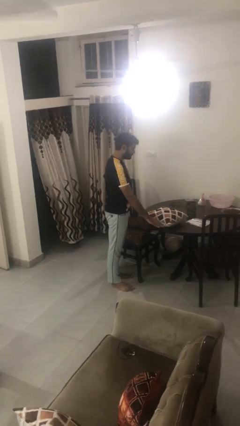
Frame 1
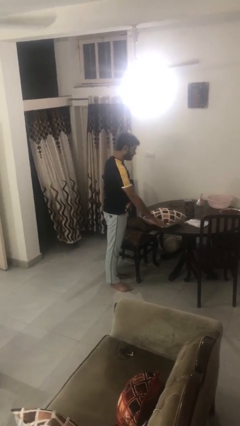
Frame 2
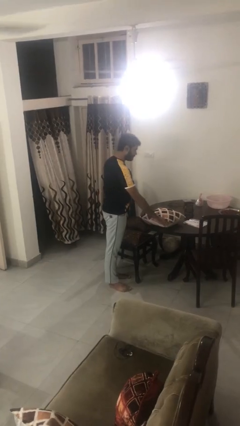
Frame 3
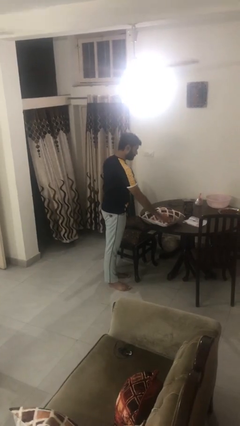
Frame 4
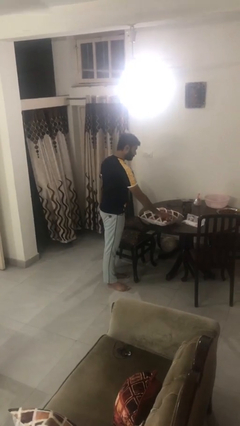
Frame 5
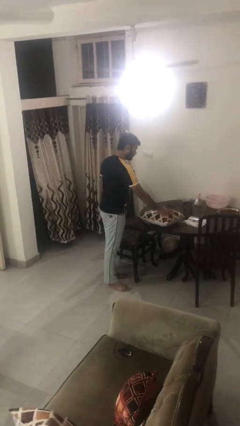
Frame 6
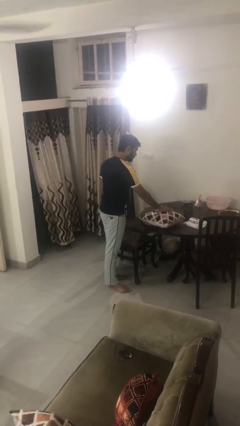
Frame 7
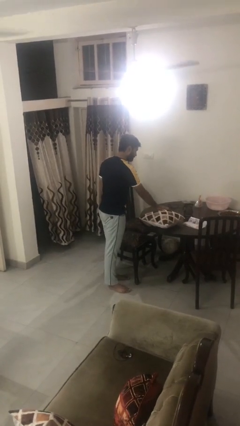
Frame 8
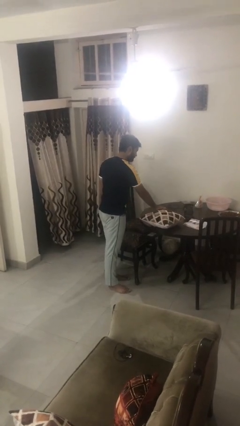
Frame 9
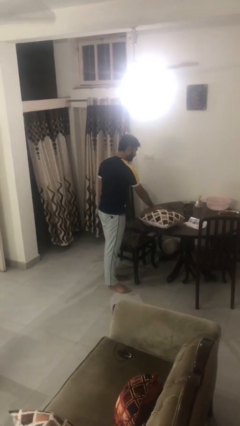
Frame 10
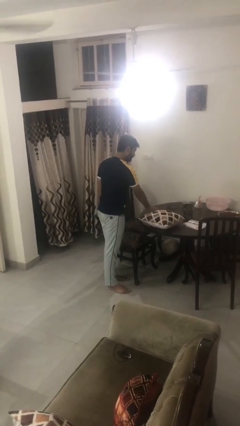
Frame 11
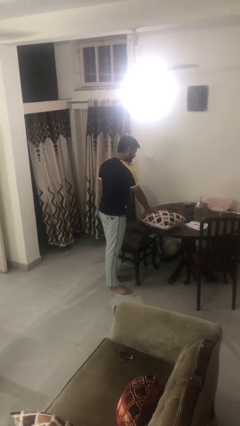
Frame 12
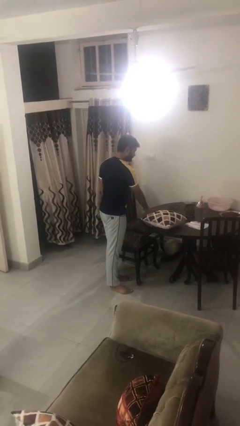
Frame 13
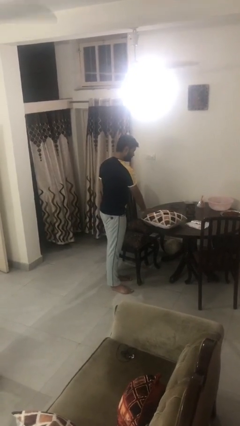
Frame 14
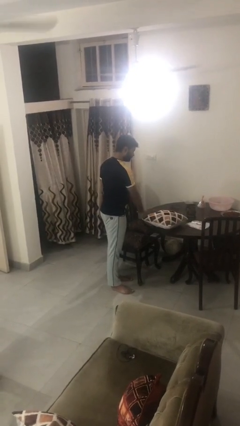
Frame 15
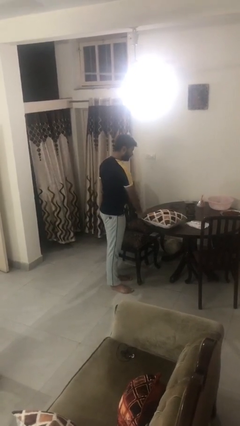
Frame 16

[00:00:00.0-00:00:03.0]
person waves hand over object

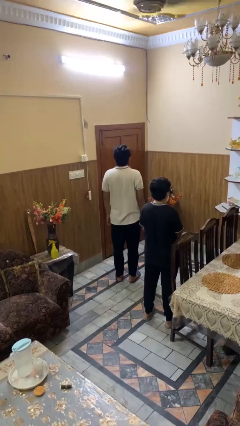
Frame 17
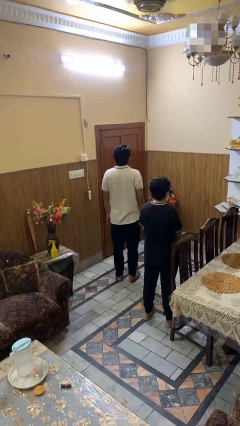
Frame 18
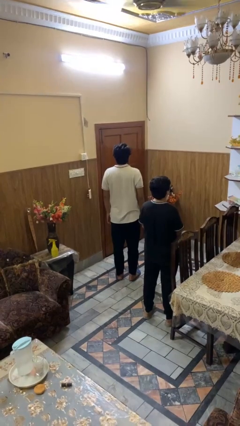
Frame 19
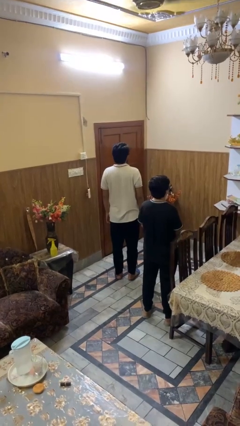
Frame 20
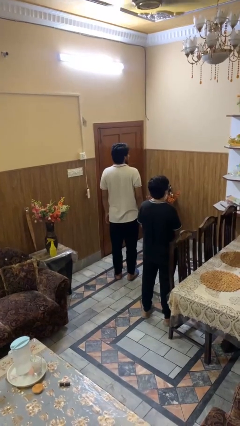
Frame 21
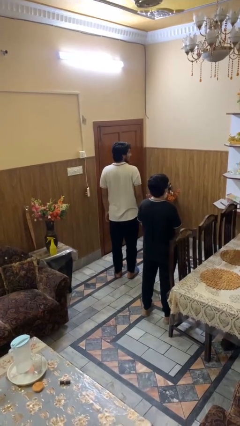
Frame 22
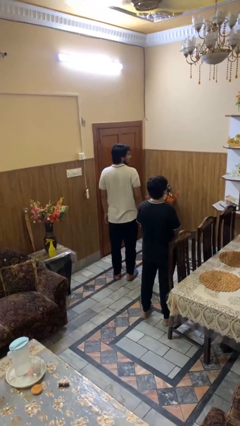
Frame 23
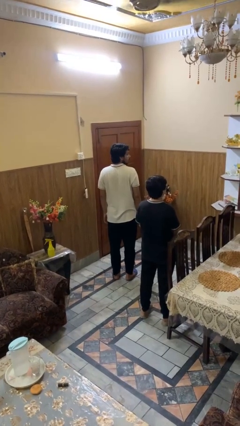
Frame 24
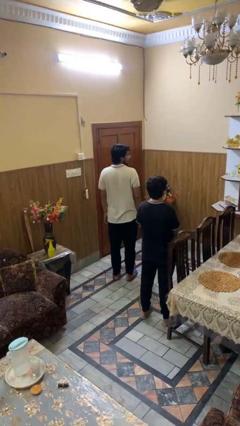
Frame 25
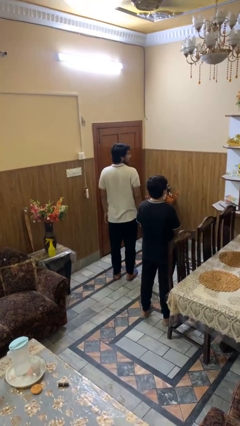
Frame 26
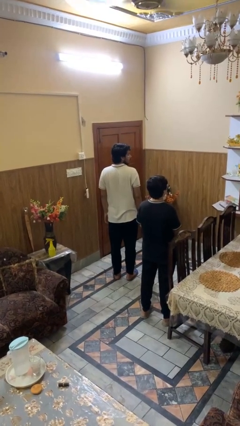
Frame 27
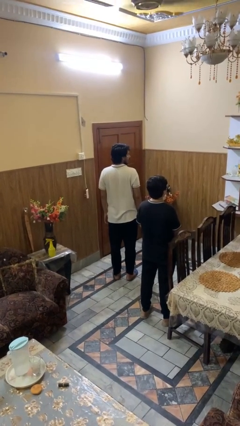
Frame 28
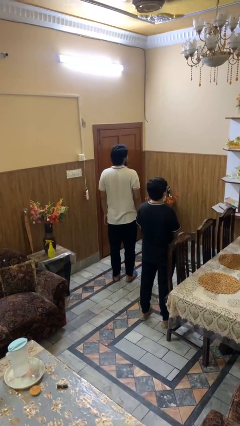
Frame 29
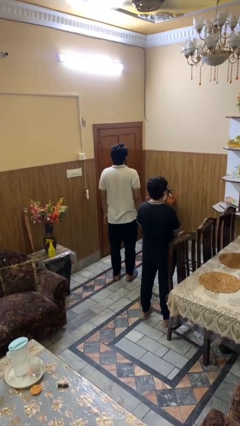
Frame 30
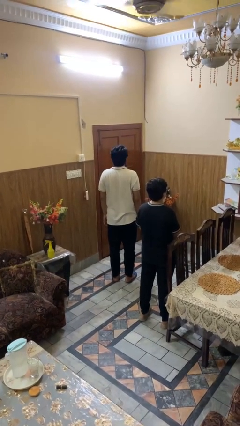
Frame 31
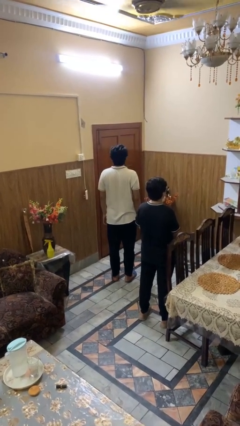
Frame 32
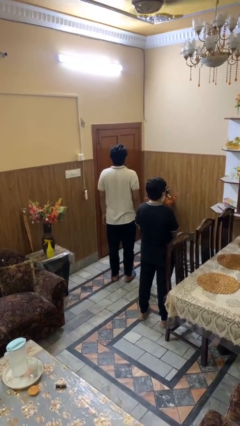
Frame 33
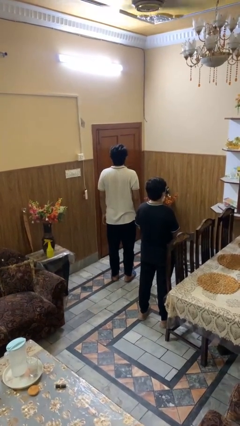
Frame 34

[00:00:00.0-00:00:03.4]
person looks over shoulder

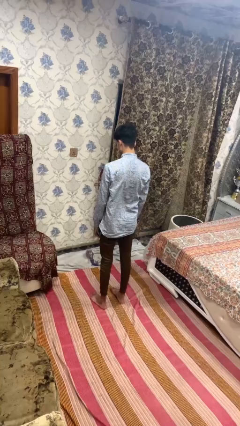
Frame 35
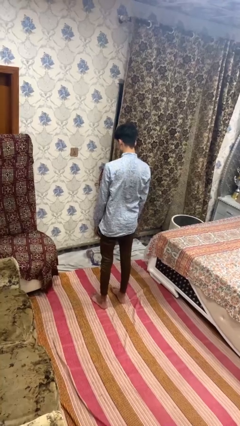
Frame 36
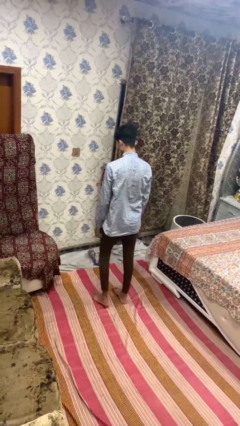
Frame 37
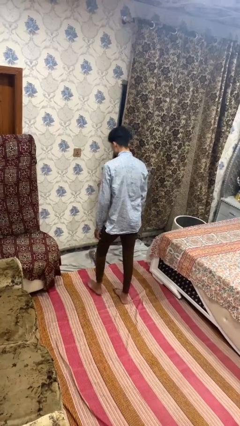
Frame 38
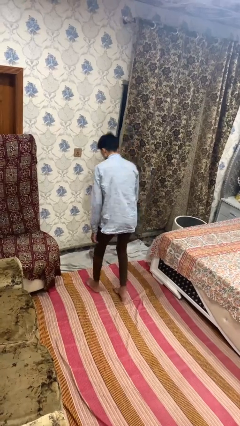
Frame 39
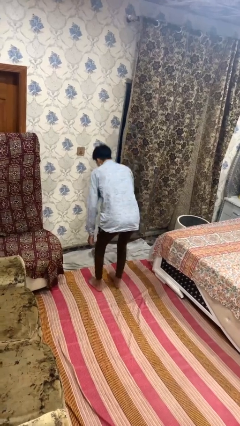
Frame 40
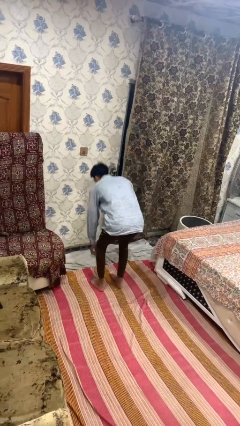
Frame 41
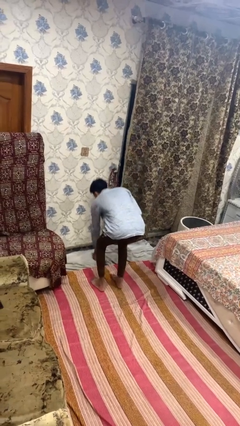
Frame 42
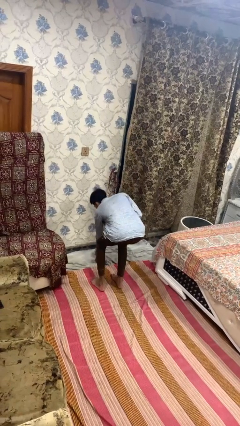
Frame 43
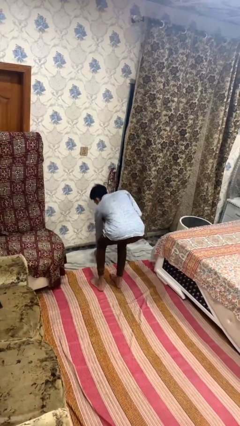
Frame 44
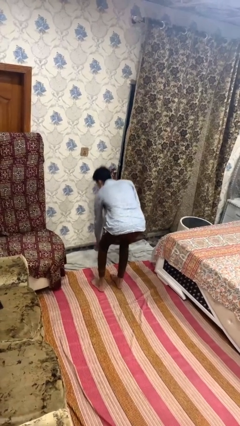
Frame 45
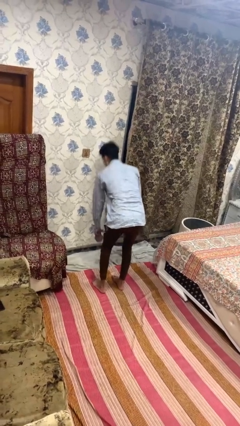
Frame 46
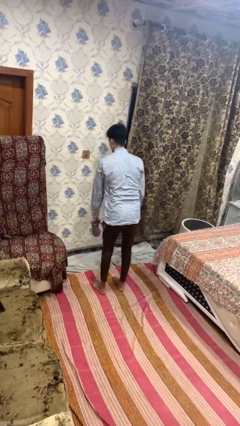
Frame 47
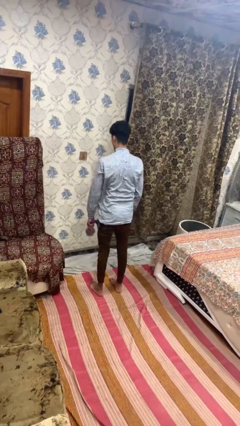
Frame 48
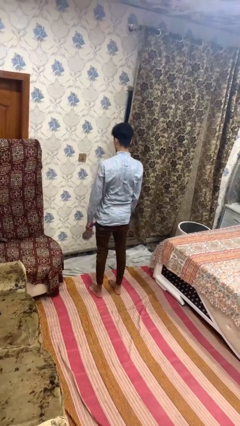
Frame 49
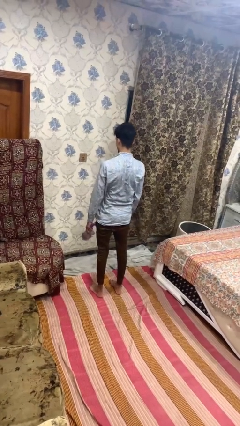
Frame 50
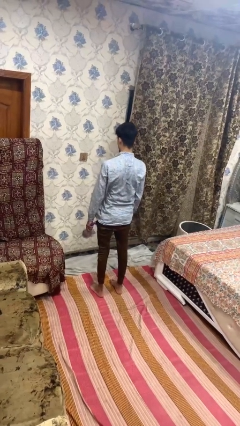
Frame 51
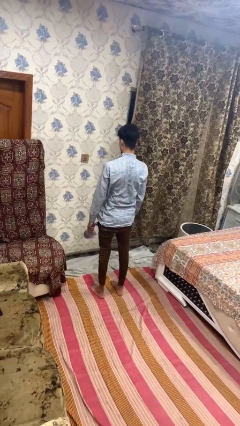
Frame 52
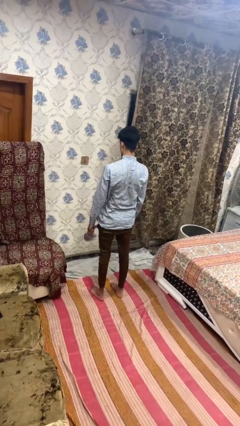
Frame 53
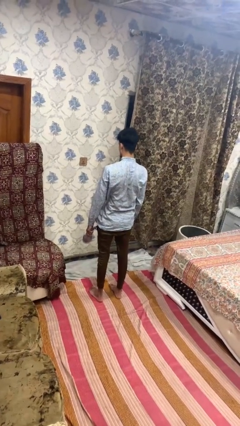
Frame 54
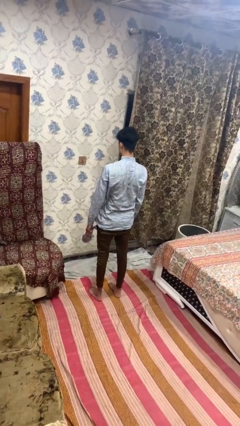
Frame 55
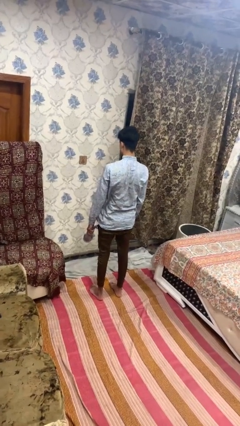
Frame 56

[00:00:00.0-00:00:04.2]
person picks up object from floor

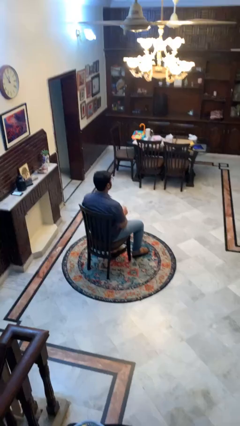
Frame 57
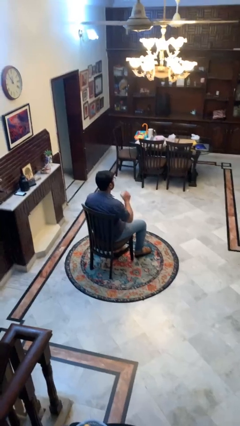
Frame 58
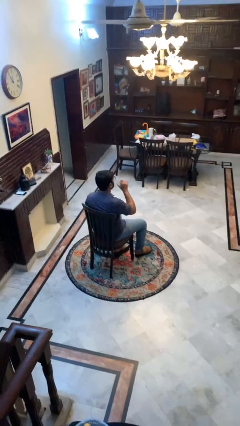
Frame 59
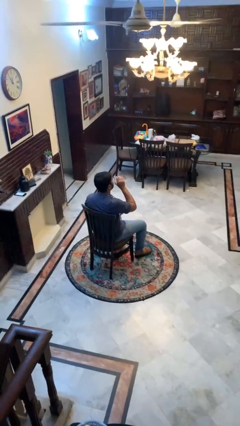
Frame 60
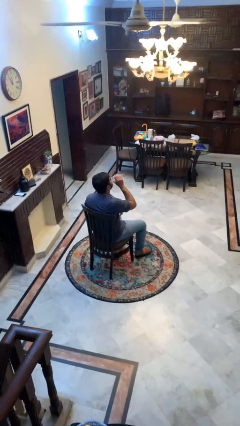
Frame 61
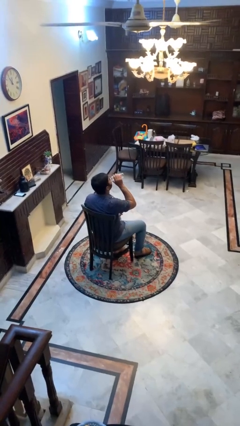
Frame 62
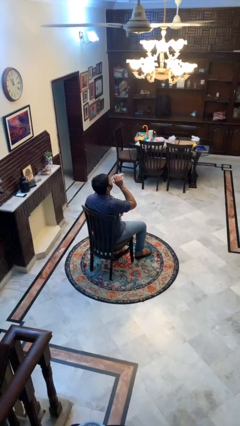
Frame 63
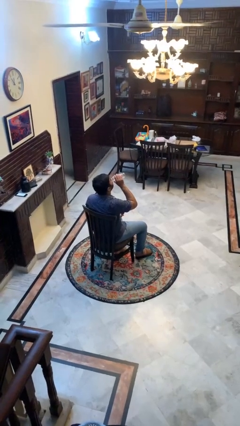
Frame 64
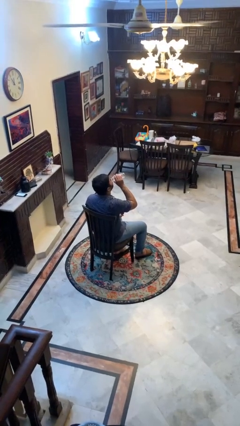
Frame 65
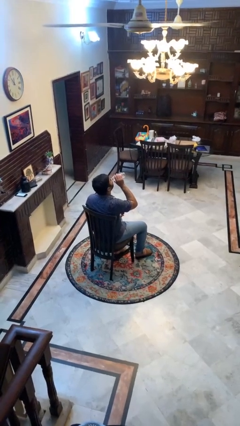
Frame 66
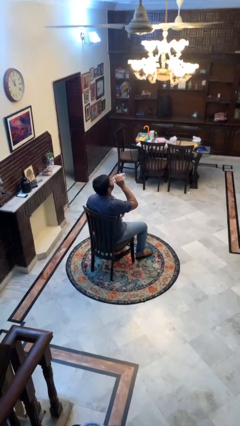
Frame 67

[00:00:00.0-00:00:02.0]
person drinks from bottle

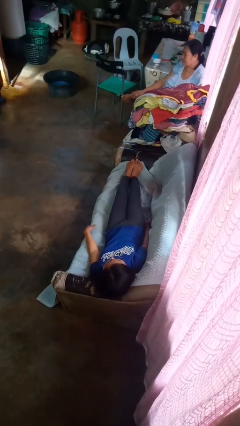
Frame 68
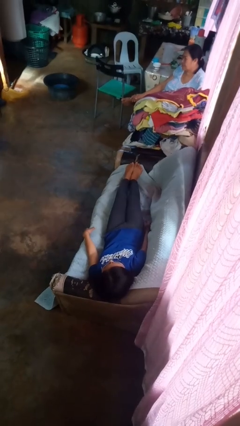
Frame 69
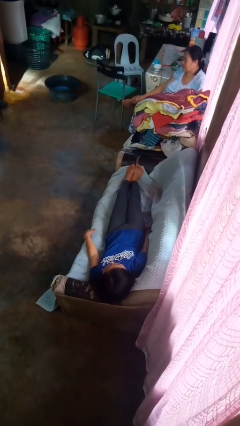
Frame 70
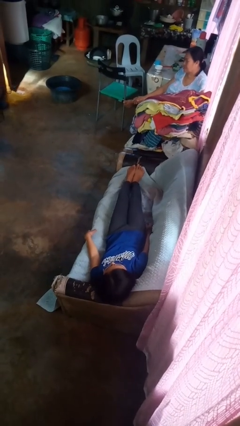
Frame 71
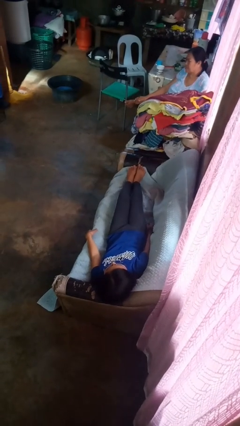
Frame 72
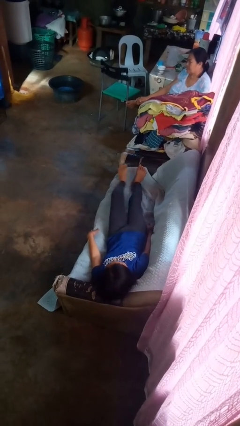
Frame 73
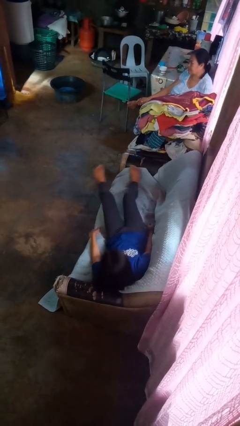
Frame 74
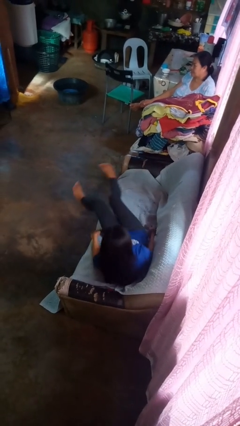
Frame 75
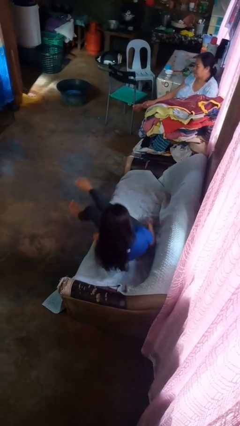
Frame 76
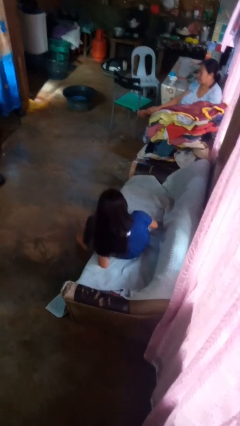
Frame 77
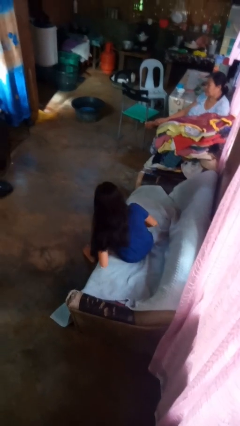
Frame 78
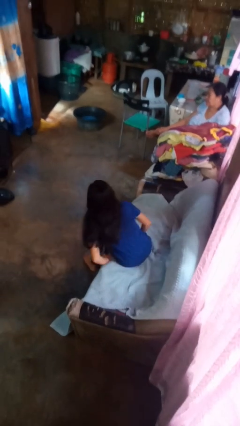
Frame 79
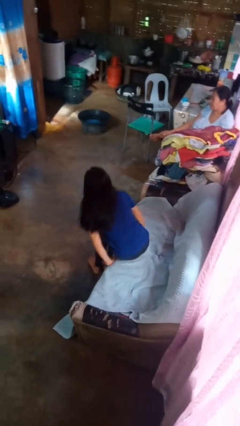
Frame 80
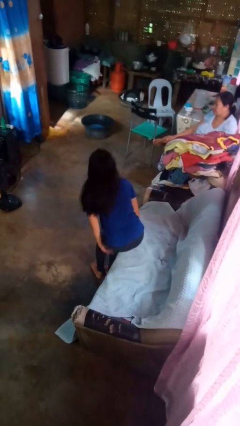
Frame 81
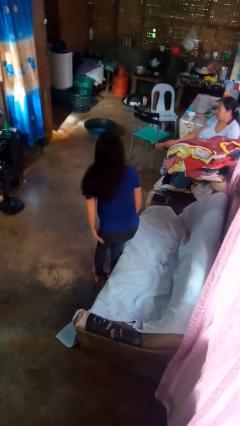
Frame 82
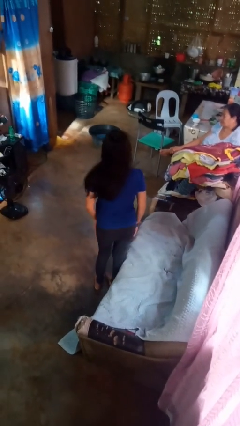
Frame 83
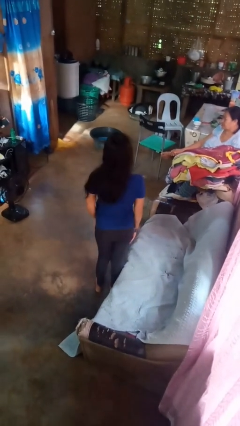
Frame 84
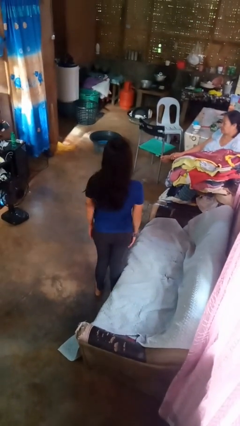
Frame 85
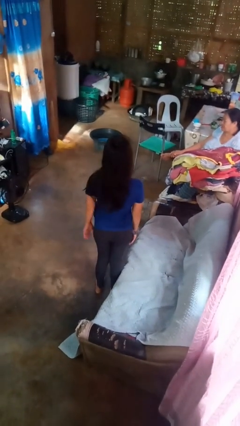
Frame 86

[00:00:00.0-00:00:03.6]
person stands up

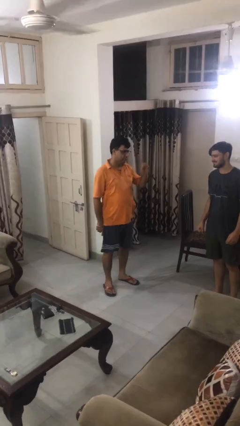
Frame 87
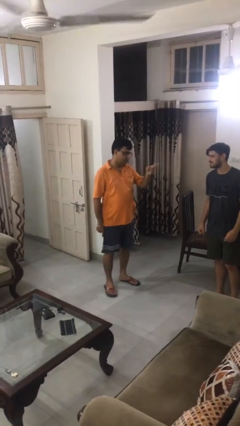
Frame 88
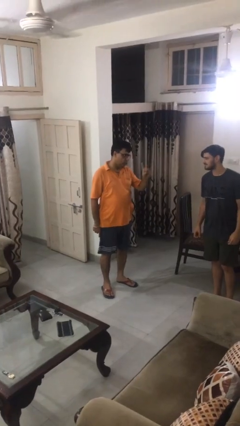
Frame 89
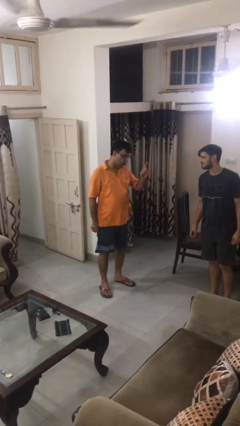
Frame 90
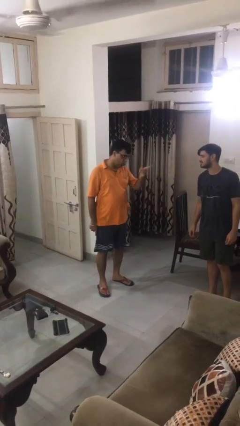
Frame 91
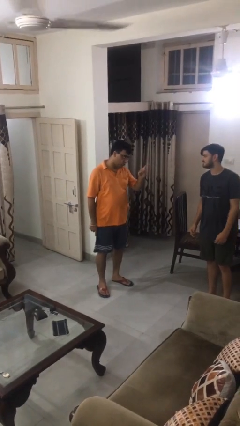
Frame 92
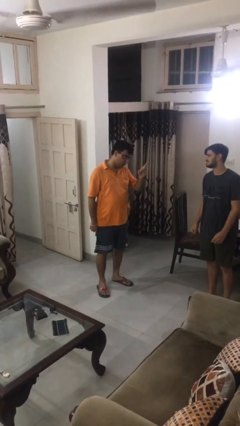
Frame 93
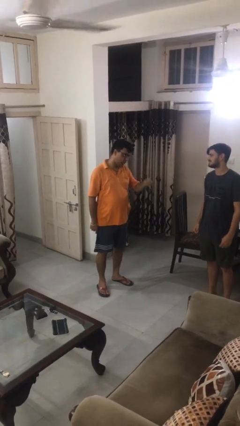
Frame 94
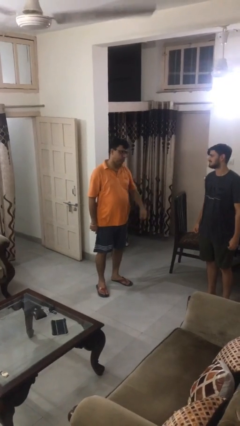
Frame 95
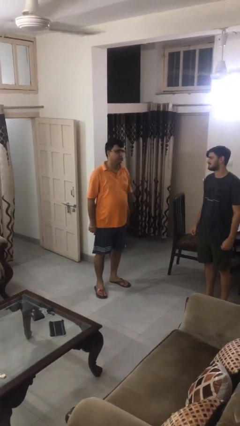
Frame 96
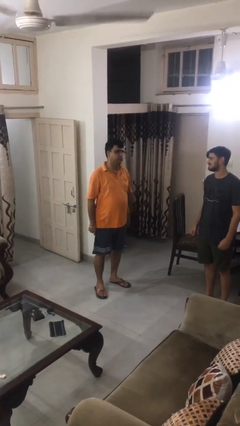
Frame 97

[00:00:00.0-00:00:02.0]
person points at person
